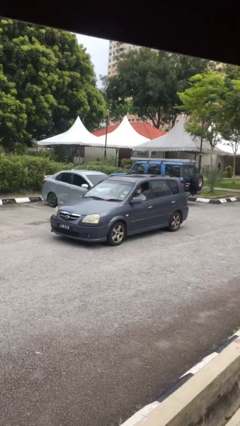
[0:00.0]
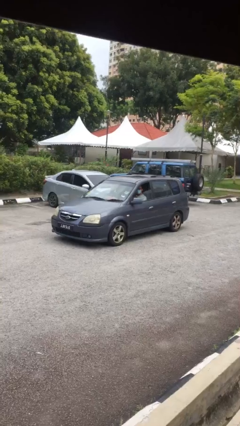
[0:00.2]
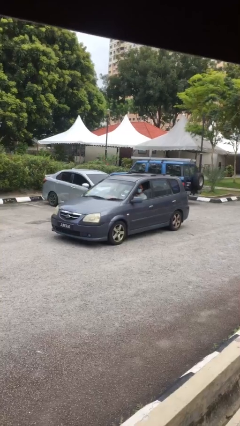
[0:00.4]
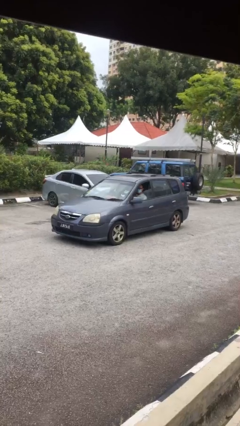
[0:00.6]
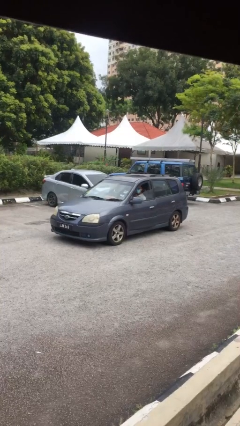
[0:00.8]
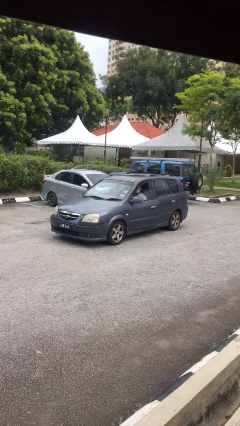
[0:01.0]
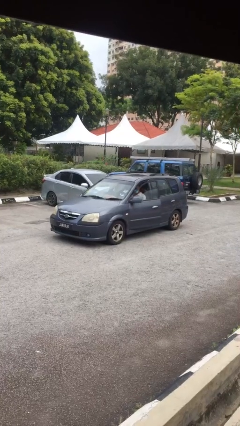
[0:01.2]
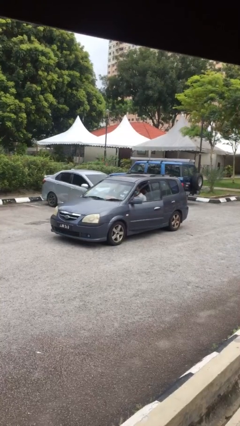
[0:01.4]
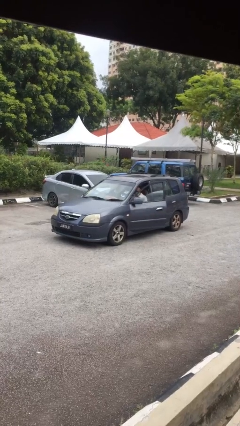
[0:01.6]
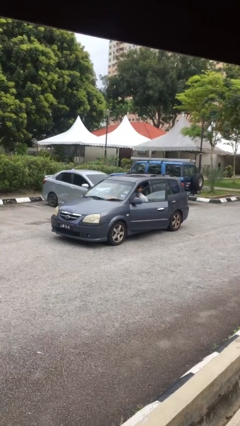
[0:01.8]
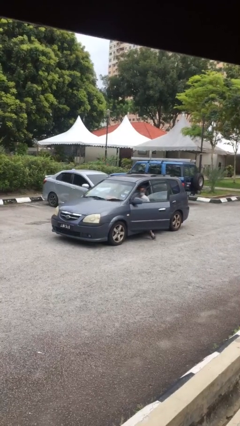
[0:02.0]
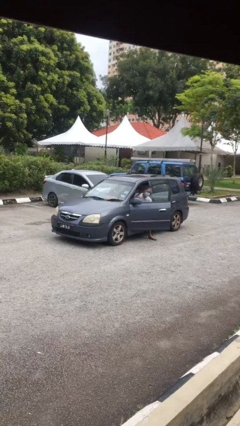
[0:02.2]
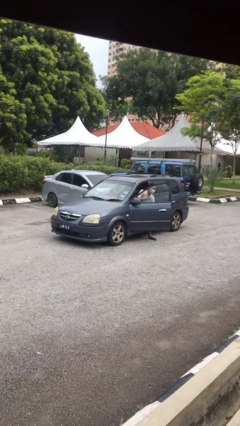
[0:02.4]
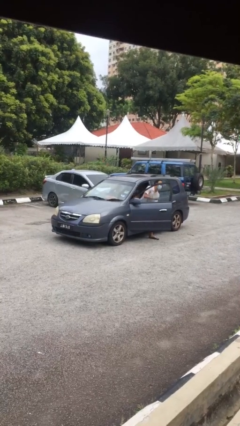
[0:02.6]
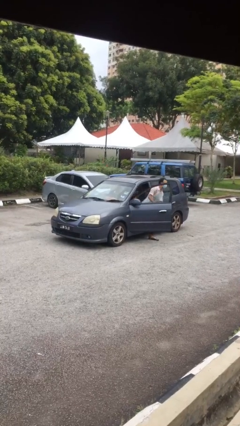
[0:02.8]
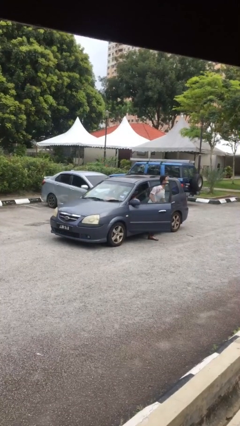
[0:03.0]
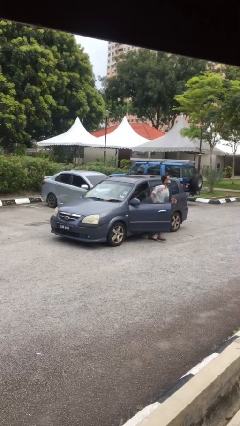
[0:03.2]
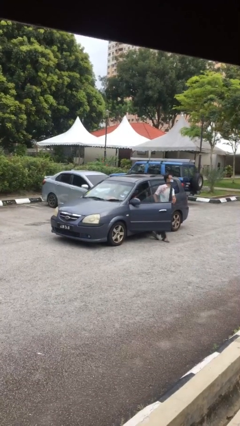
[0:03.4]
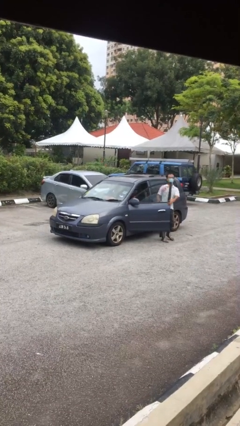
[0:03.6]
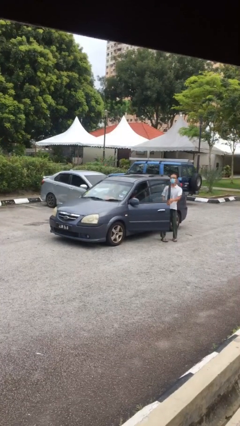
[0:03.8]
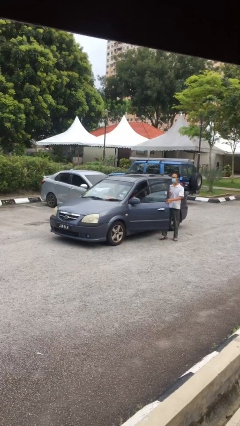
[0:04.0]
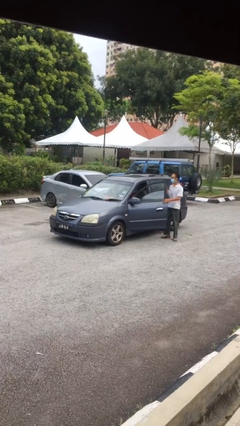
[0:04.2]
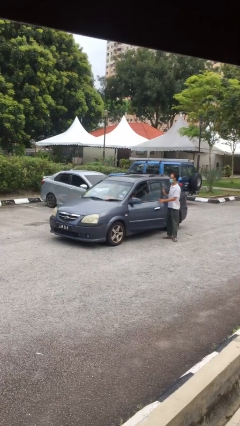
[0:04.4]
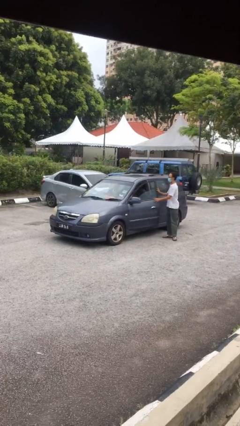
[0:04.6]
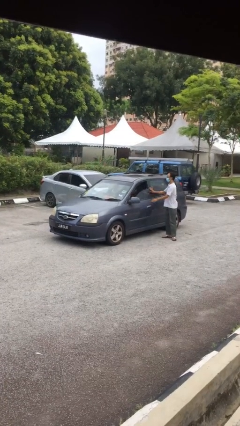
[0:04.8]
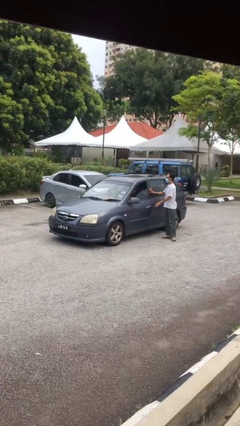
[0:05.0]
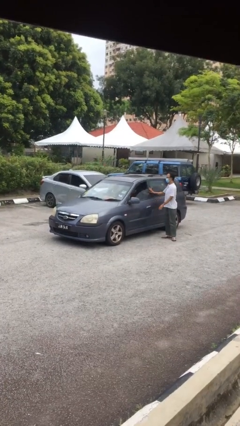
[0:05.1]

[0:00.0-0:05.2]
car drops off person

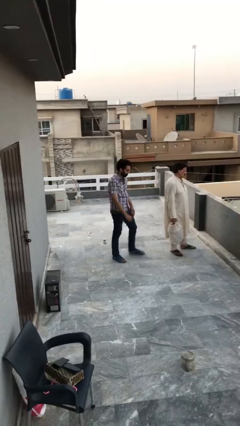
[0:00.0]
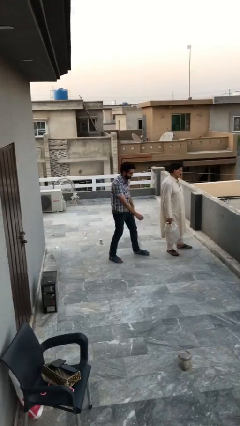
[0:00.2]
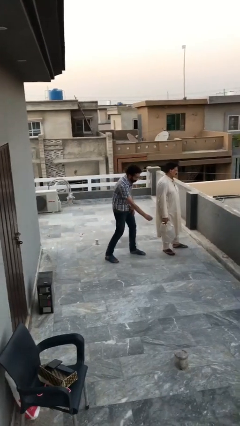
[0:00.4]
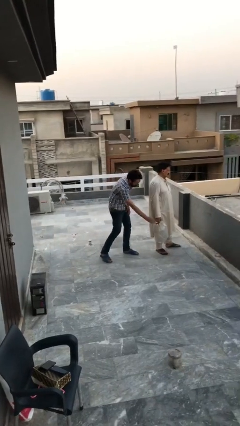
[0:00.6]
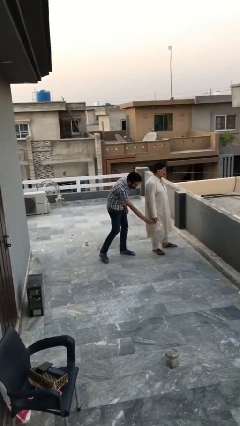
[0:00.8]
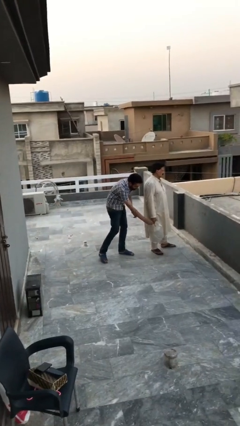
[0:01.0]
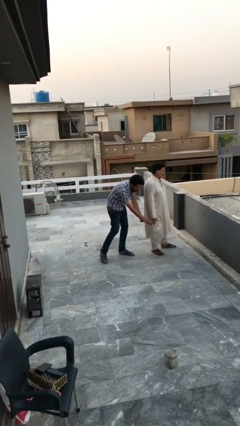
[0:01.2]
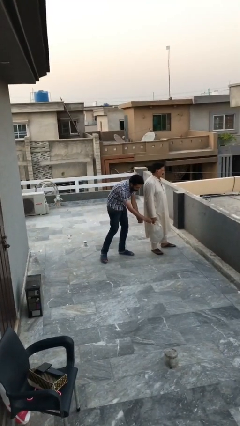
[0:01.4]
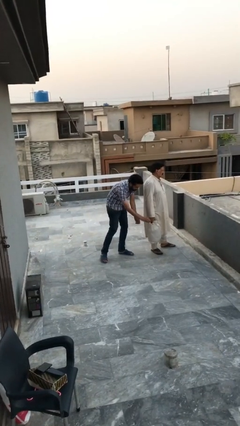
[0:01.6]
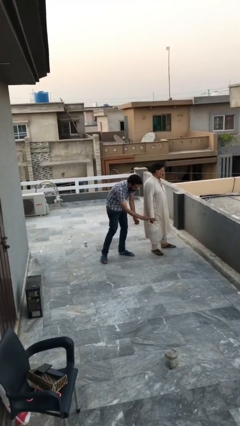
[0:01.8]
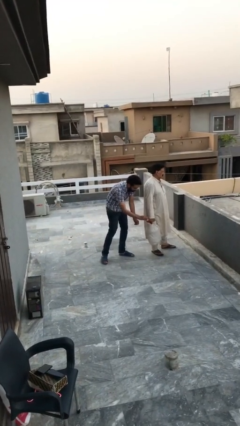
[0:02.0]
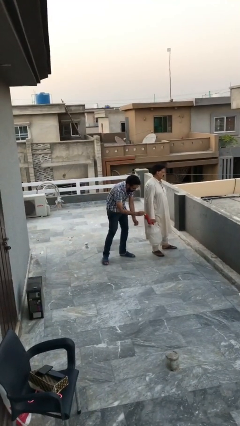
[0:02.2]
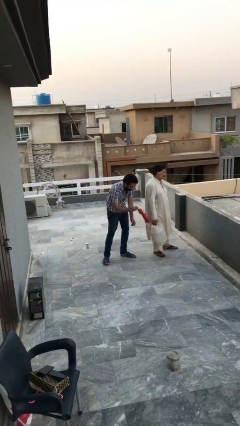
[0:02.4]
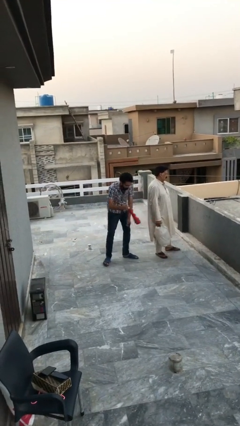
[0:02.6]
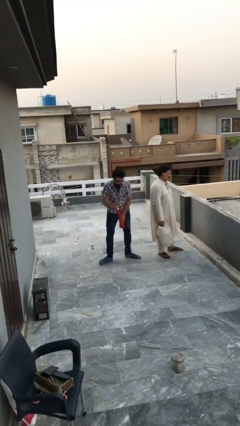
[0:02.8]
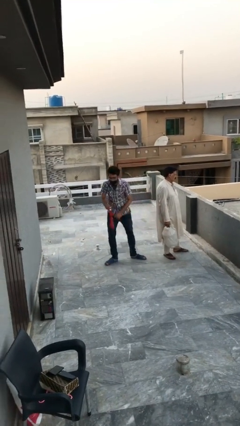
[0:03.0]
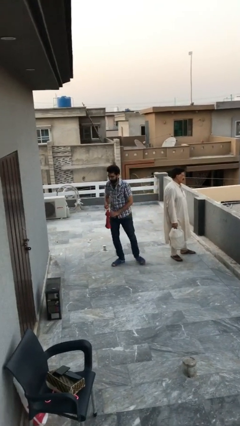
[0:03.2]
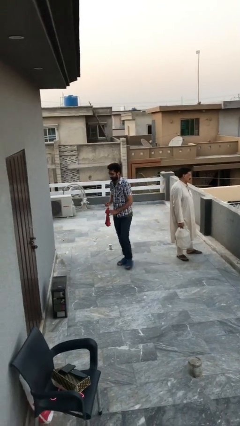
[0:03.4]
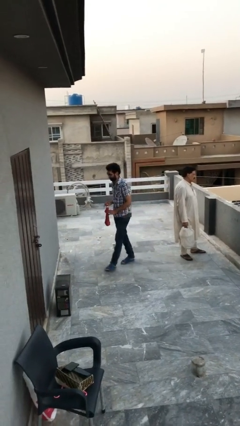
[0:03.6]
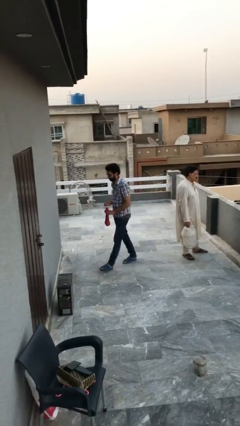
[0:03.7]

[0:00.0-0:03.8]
person steals object from person

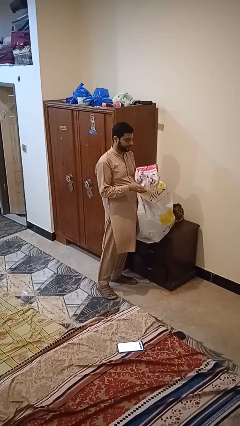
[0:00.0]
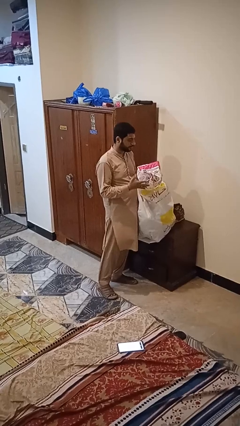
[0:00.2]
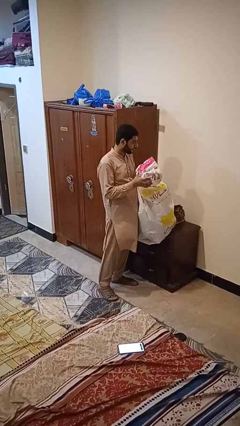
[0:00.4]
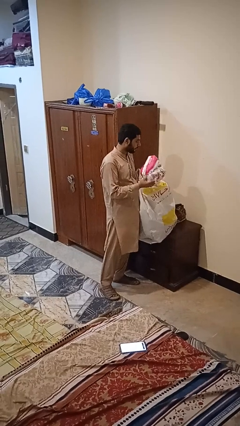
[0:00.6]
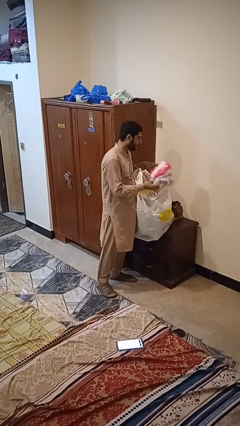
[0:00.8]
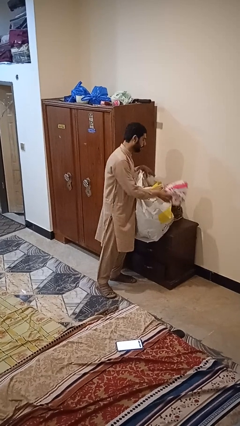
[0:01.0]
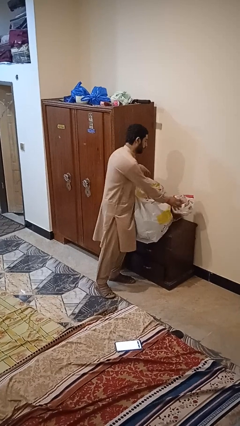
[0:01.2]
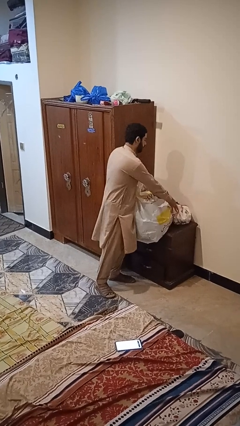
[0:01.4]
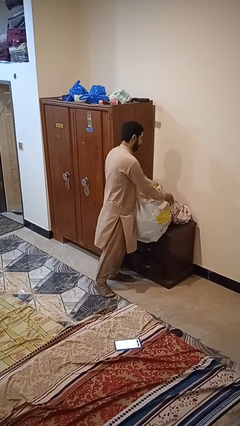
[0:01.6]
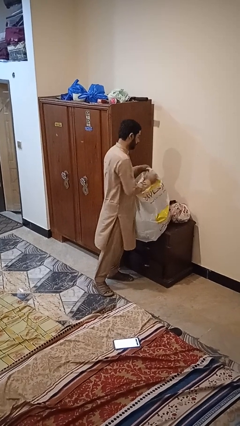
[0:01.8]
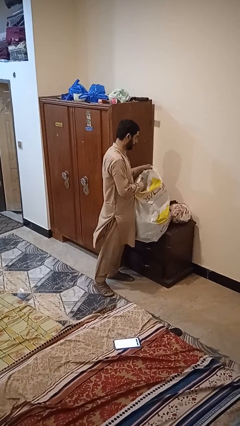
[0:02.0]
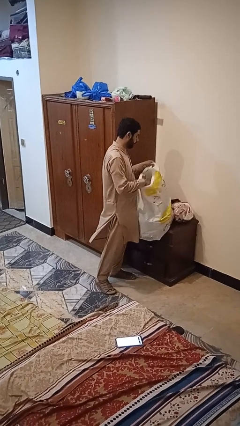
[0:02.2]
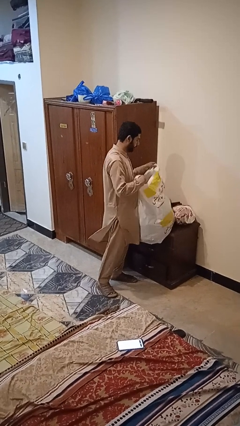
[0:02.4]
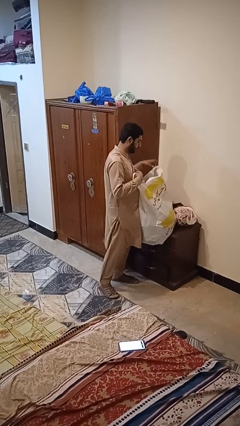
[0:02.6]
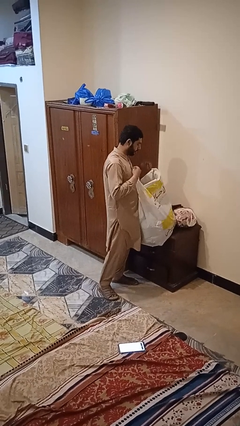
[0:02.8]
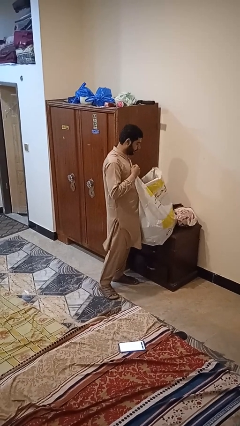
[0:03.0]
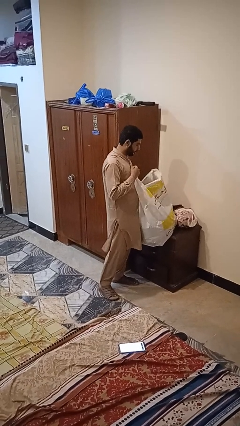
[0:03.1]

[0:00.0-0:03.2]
person puts object into bag

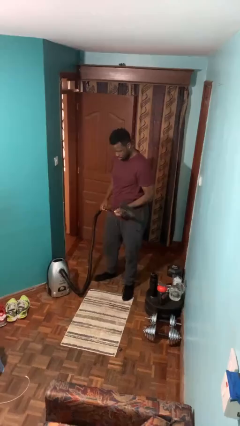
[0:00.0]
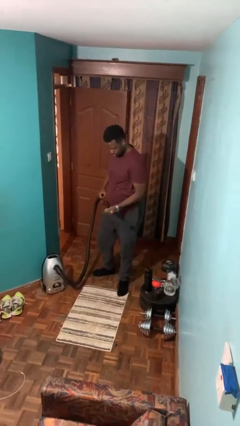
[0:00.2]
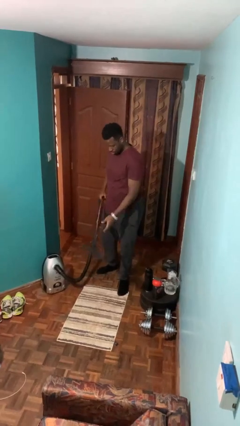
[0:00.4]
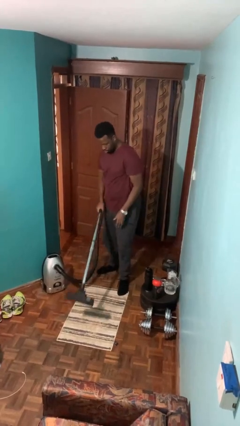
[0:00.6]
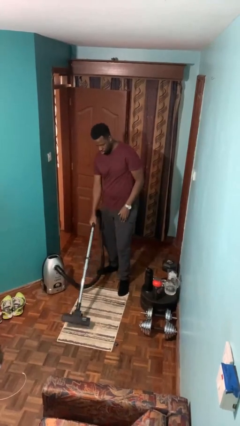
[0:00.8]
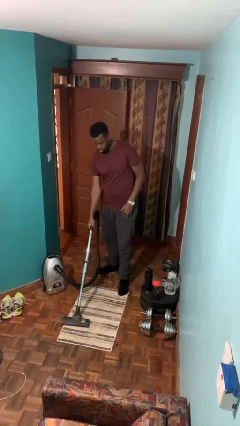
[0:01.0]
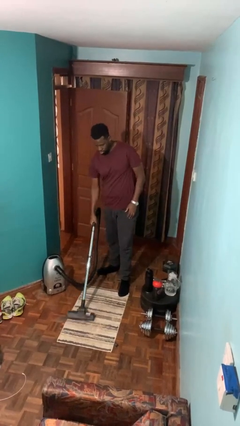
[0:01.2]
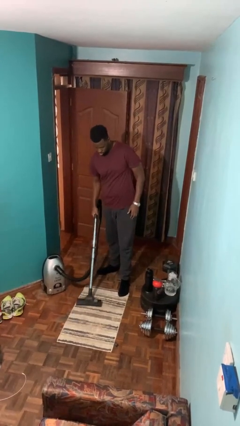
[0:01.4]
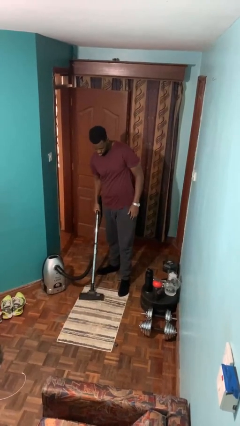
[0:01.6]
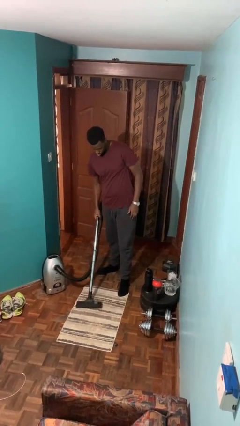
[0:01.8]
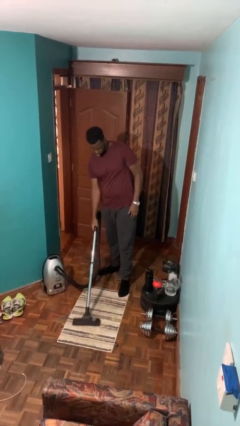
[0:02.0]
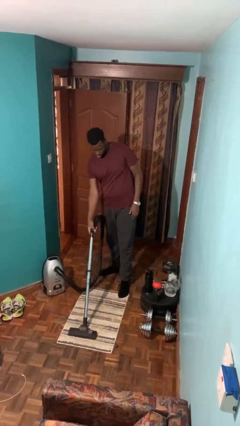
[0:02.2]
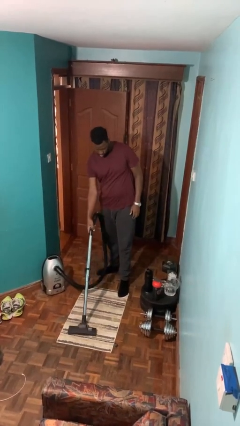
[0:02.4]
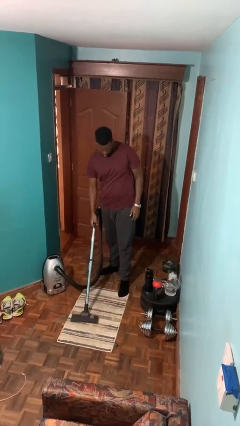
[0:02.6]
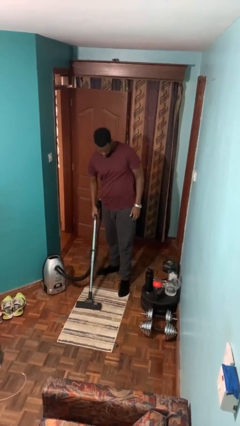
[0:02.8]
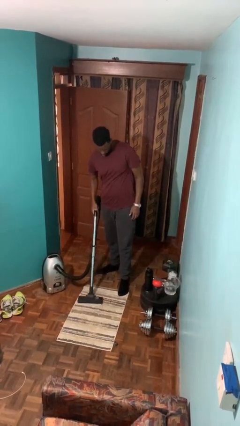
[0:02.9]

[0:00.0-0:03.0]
person vacuums carpet

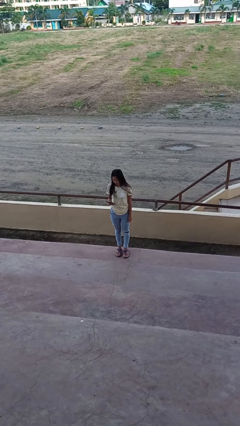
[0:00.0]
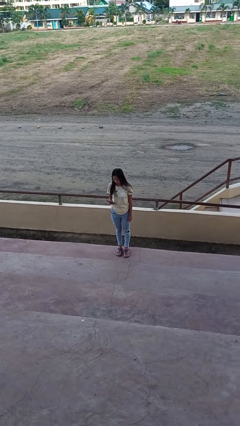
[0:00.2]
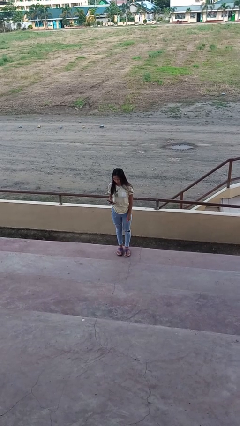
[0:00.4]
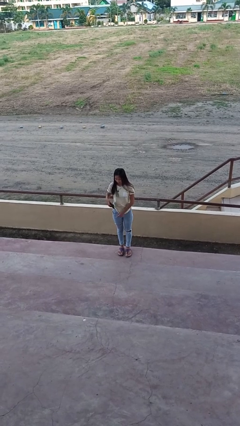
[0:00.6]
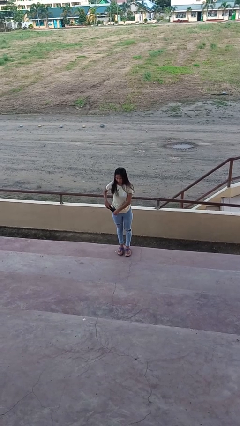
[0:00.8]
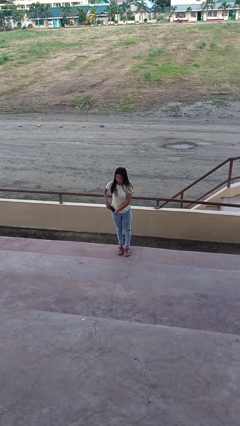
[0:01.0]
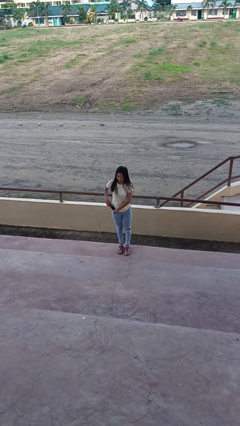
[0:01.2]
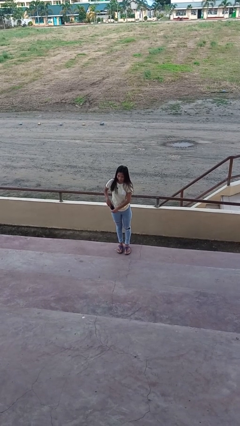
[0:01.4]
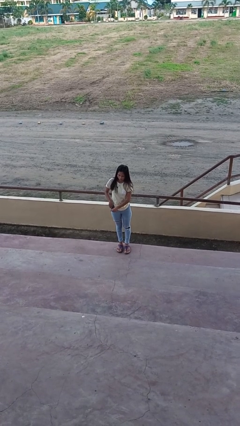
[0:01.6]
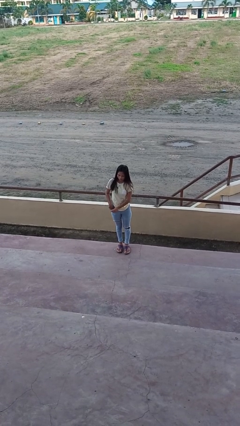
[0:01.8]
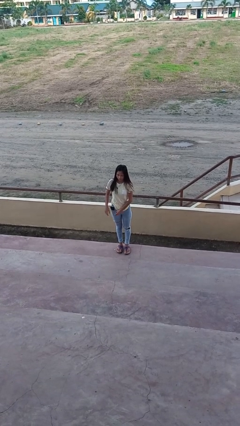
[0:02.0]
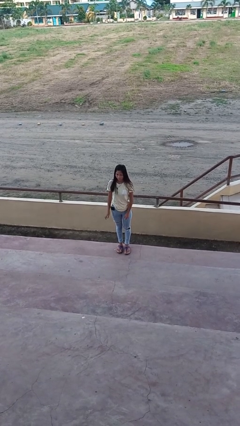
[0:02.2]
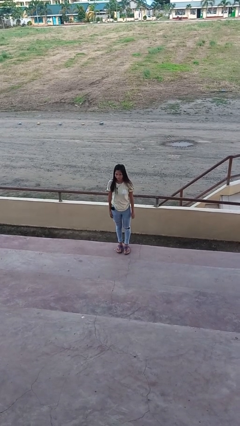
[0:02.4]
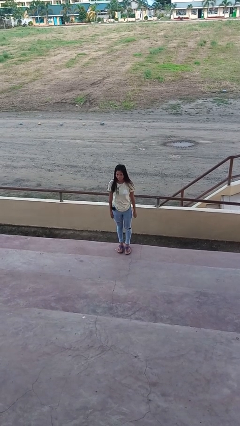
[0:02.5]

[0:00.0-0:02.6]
person puts phone into pocket
